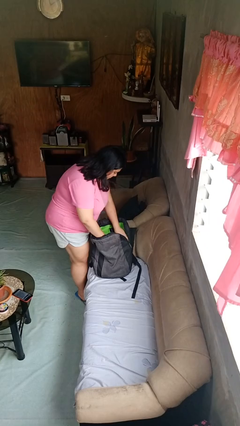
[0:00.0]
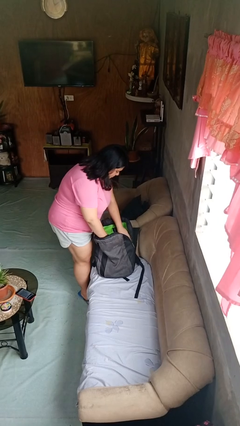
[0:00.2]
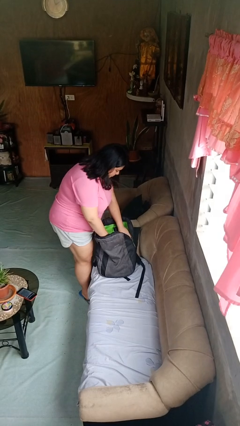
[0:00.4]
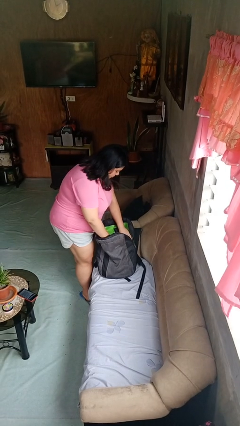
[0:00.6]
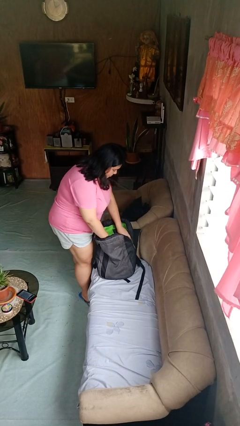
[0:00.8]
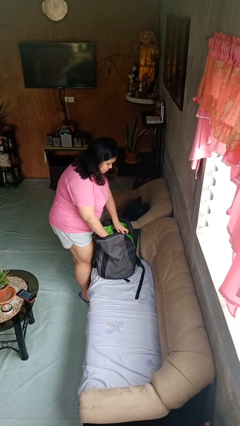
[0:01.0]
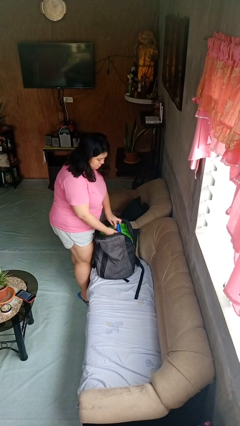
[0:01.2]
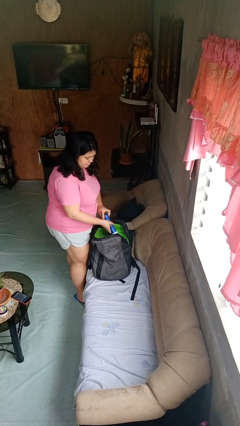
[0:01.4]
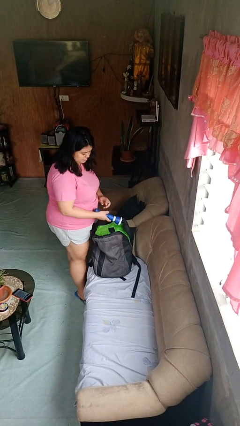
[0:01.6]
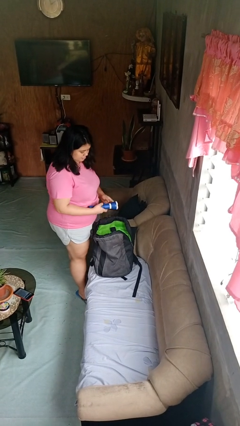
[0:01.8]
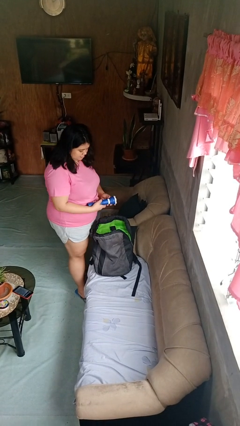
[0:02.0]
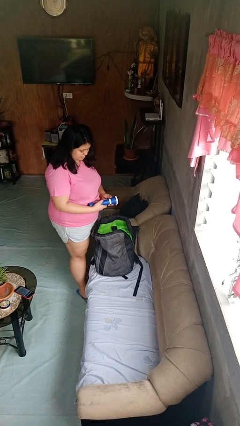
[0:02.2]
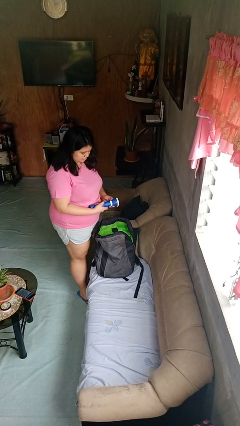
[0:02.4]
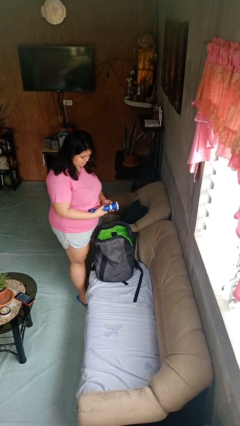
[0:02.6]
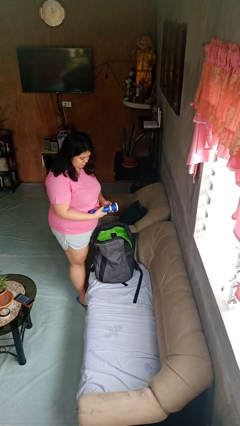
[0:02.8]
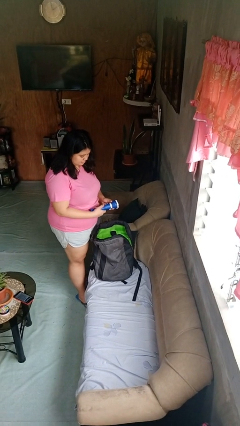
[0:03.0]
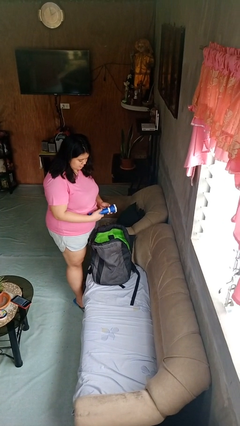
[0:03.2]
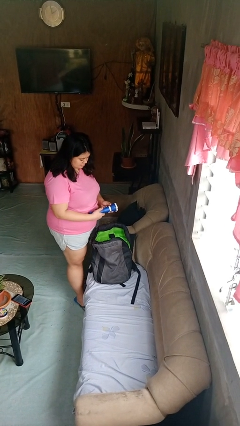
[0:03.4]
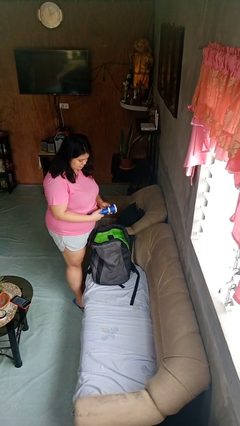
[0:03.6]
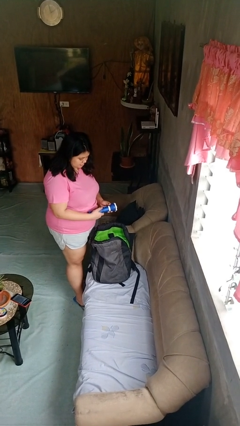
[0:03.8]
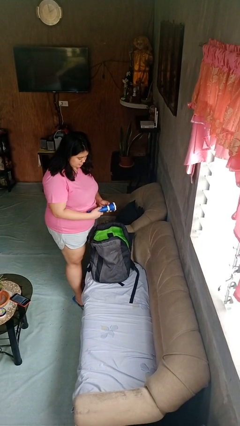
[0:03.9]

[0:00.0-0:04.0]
person takes object from backpack

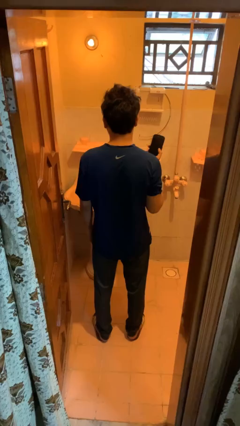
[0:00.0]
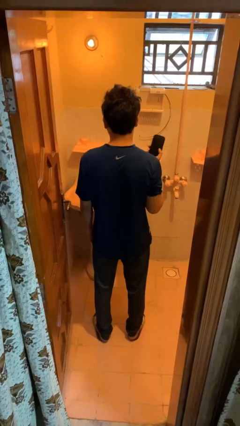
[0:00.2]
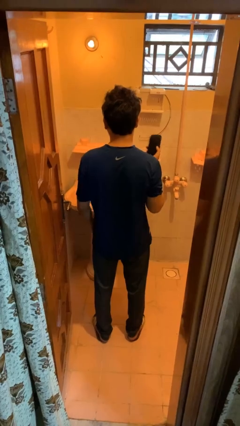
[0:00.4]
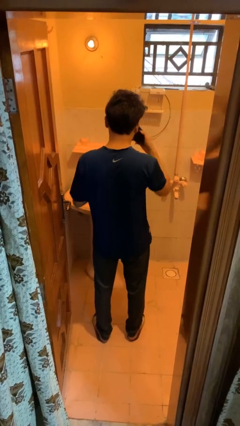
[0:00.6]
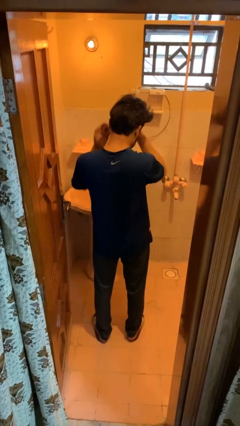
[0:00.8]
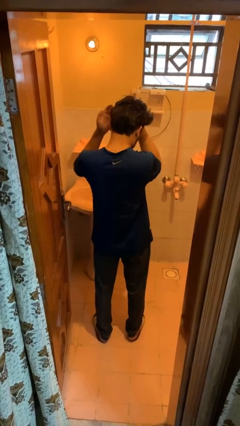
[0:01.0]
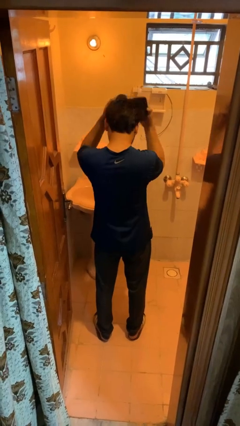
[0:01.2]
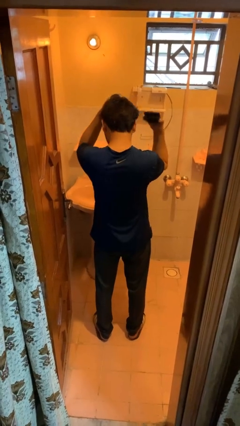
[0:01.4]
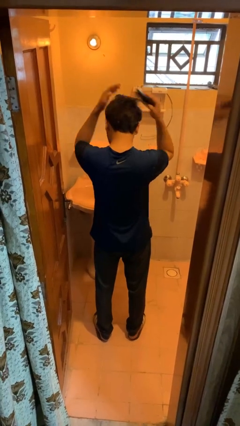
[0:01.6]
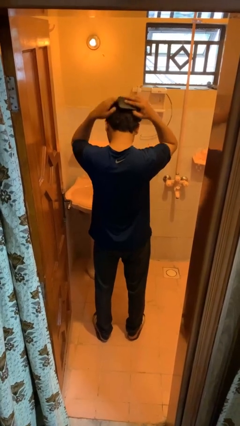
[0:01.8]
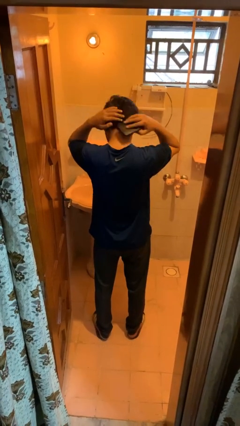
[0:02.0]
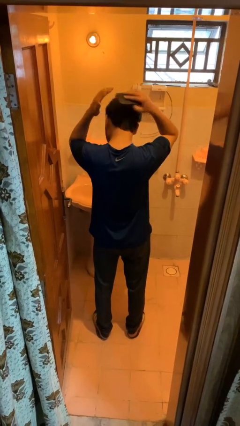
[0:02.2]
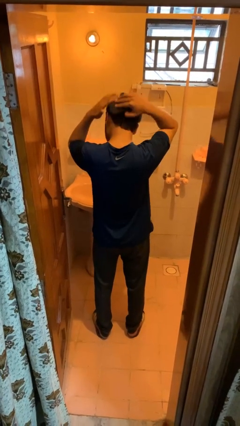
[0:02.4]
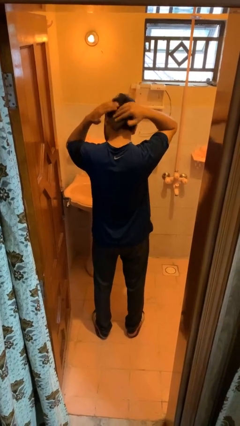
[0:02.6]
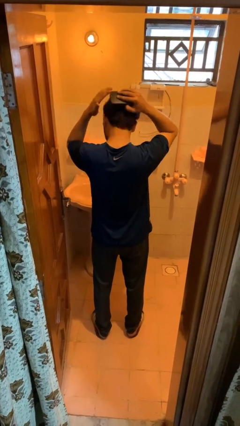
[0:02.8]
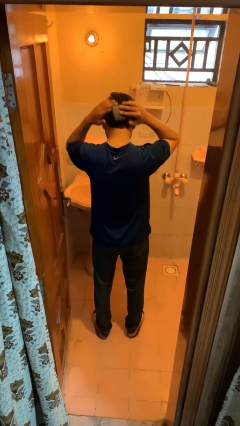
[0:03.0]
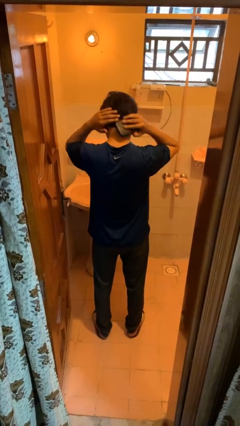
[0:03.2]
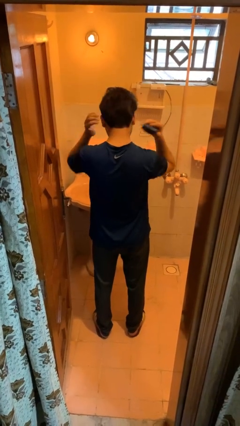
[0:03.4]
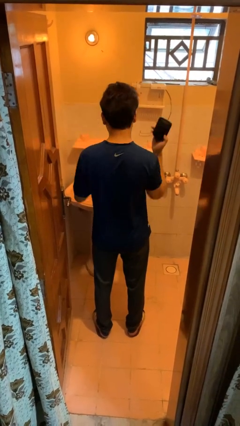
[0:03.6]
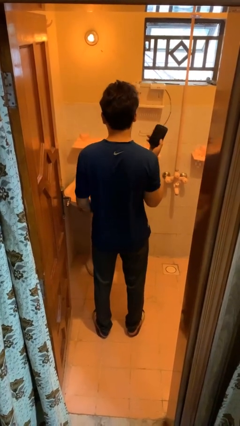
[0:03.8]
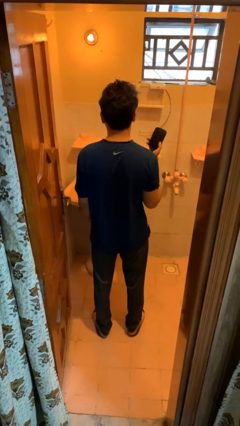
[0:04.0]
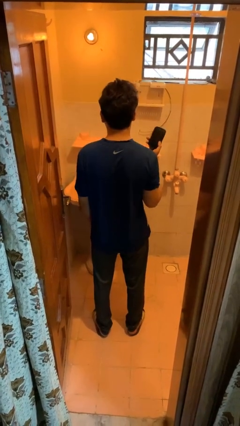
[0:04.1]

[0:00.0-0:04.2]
person brushes hair

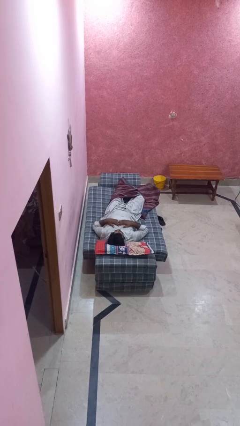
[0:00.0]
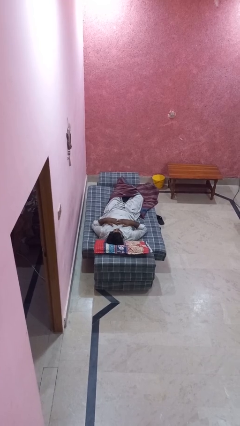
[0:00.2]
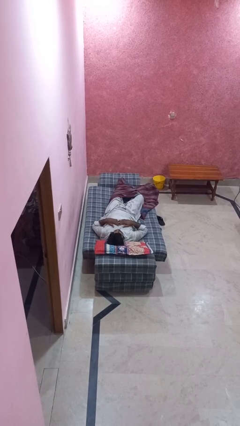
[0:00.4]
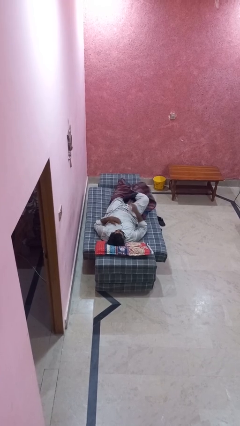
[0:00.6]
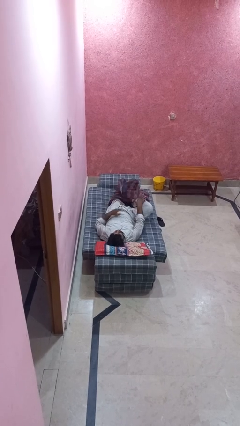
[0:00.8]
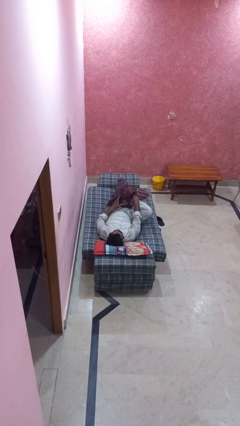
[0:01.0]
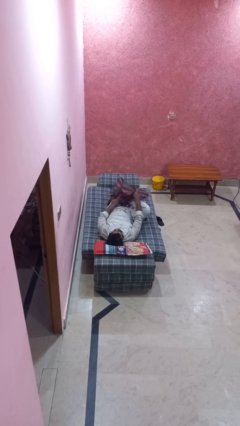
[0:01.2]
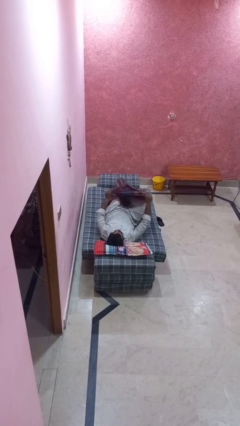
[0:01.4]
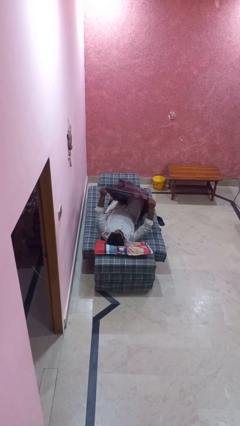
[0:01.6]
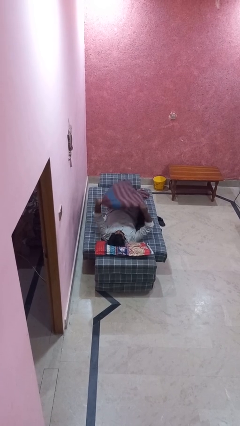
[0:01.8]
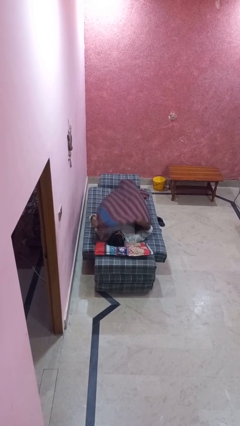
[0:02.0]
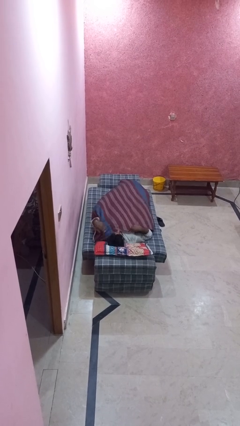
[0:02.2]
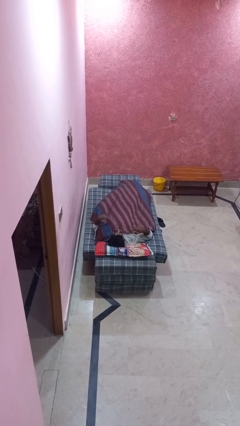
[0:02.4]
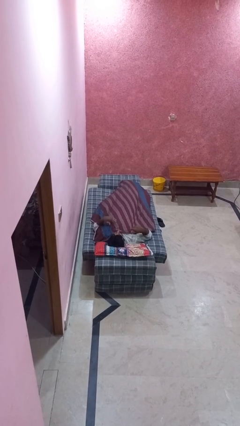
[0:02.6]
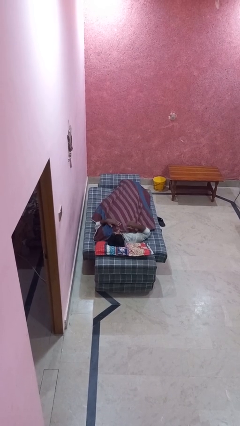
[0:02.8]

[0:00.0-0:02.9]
person covers with bedsheets

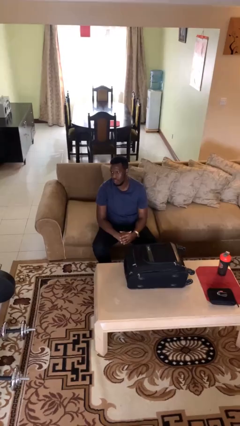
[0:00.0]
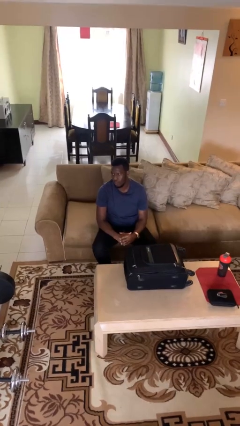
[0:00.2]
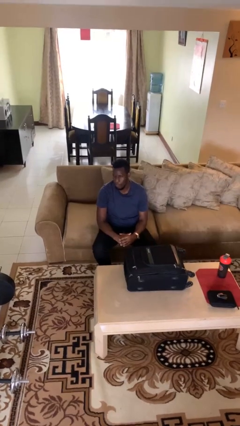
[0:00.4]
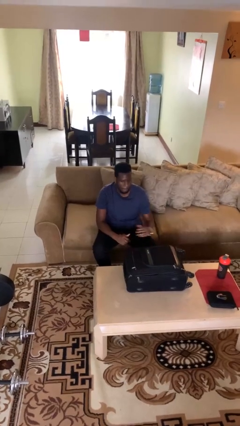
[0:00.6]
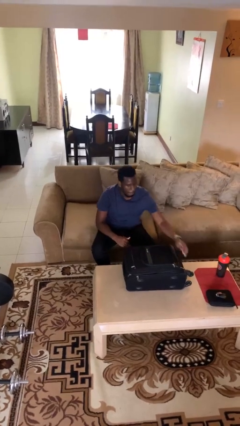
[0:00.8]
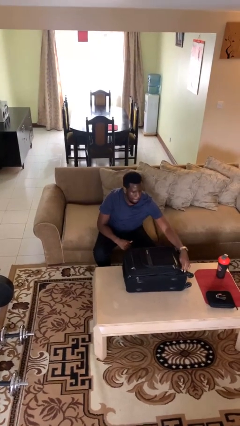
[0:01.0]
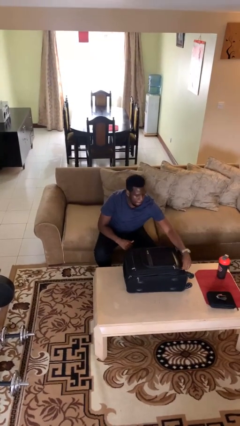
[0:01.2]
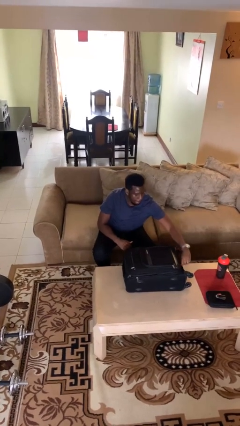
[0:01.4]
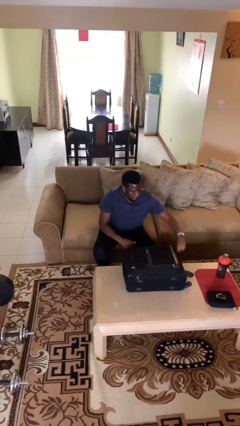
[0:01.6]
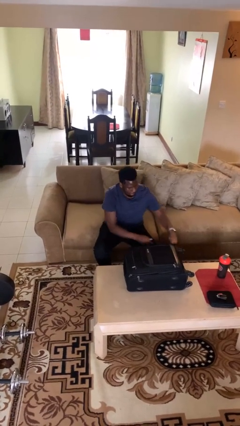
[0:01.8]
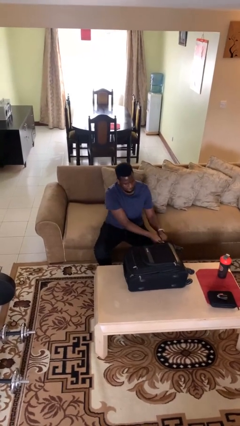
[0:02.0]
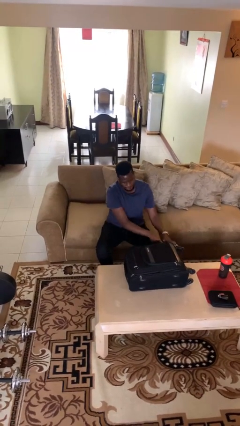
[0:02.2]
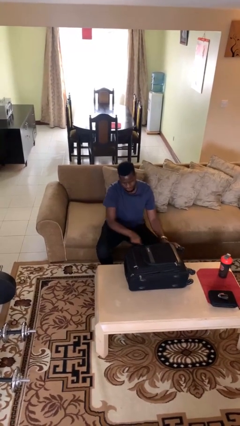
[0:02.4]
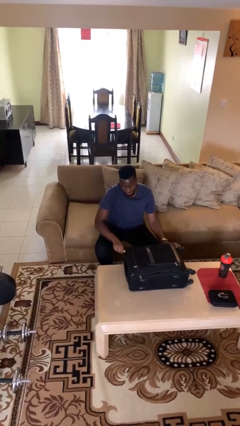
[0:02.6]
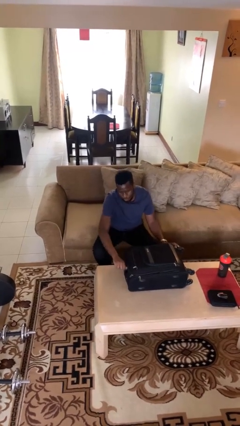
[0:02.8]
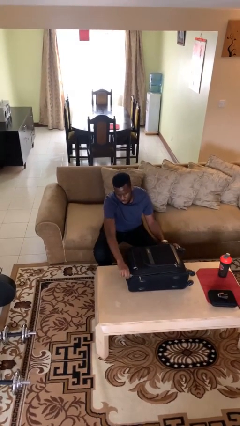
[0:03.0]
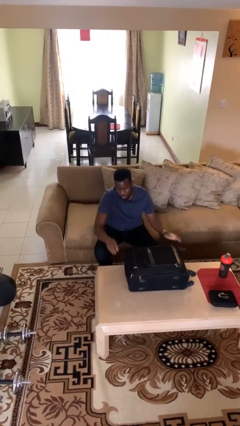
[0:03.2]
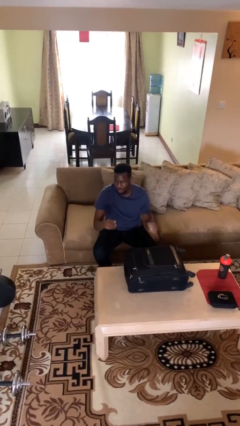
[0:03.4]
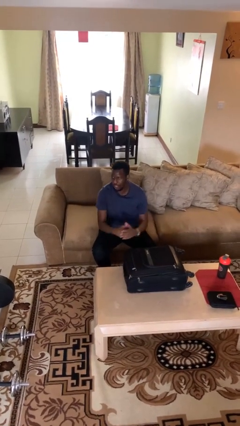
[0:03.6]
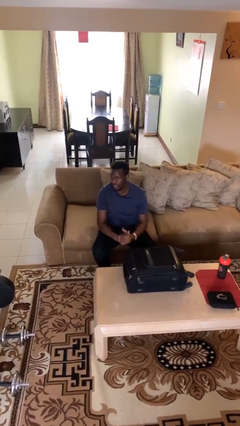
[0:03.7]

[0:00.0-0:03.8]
person closes suitcase

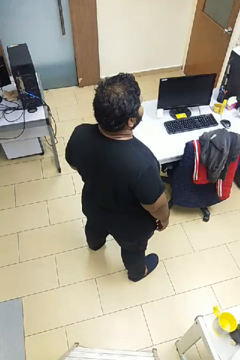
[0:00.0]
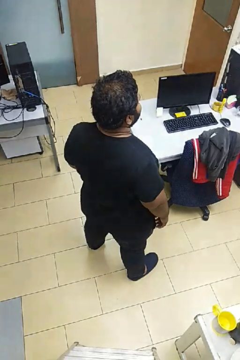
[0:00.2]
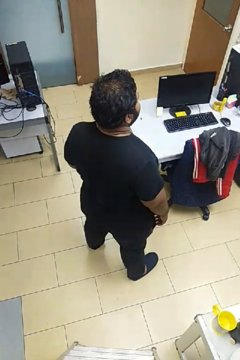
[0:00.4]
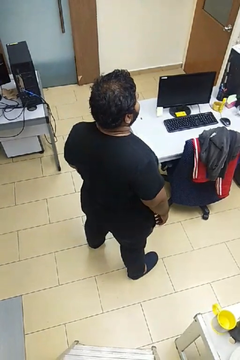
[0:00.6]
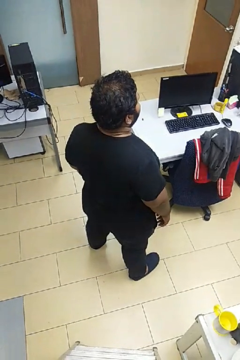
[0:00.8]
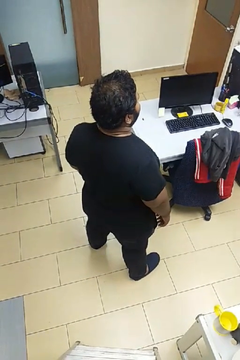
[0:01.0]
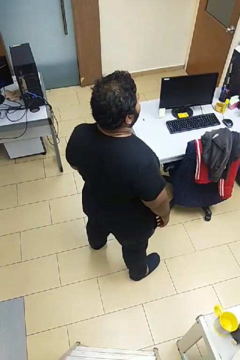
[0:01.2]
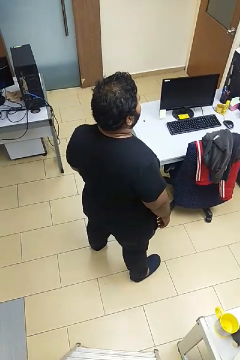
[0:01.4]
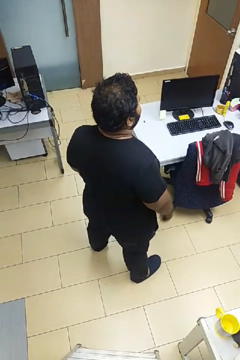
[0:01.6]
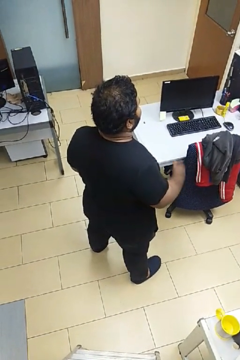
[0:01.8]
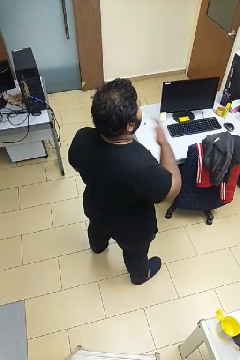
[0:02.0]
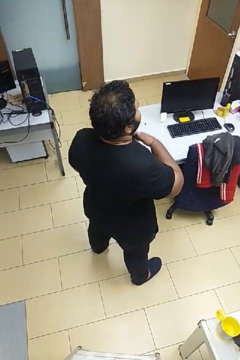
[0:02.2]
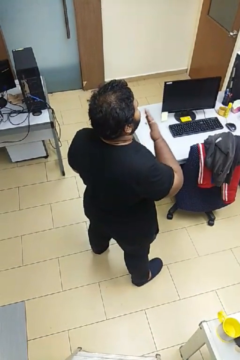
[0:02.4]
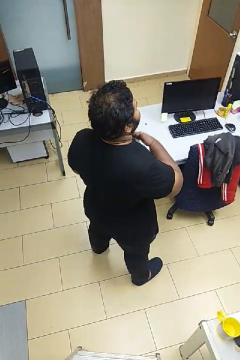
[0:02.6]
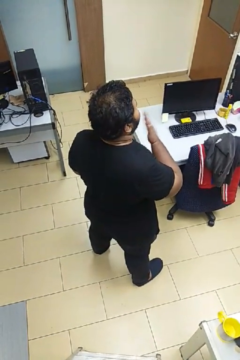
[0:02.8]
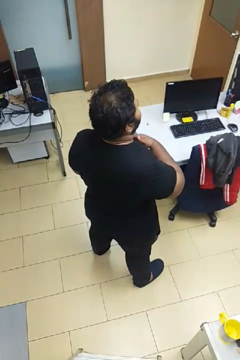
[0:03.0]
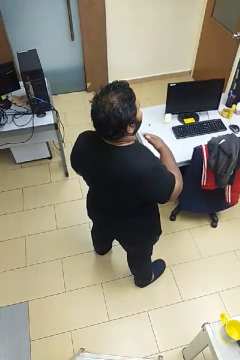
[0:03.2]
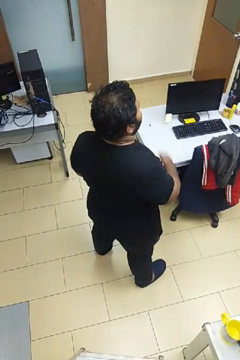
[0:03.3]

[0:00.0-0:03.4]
person drums on chest
